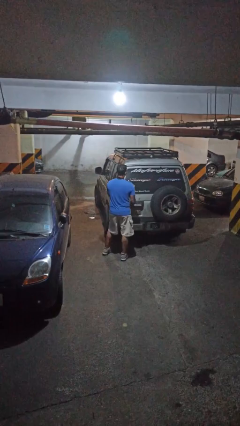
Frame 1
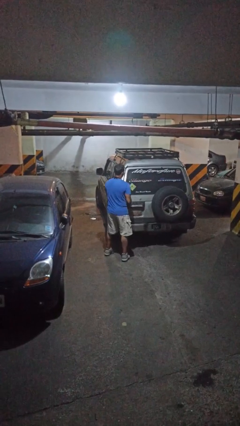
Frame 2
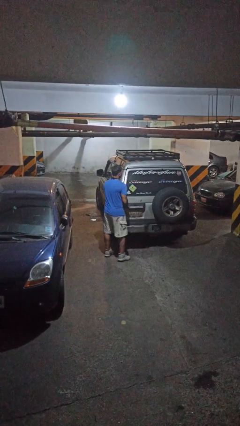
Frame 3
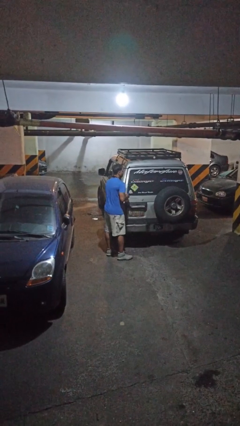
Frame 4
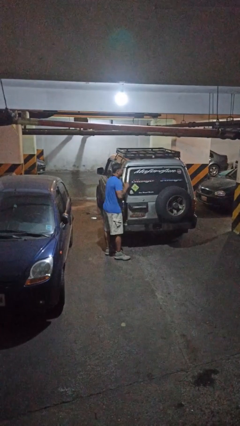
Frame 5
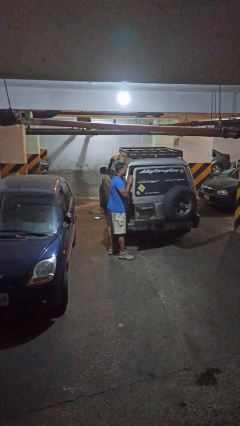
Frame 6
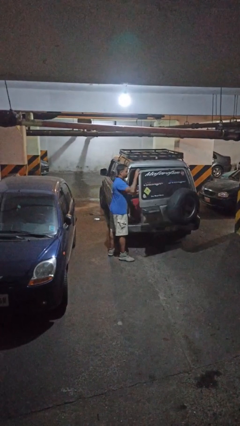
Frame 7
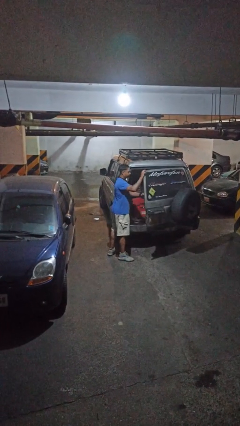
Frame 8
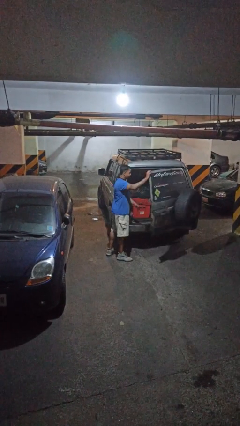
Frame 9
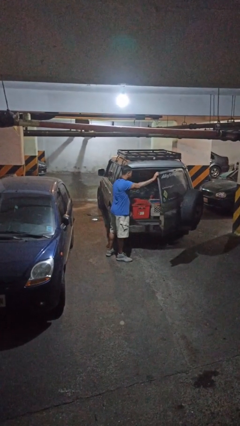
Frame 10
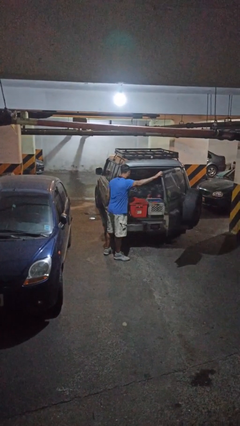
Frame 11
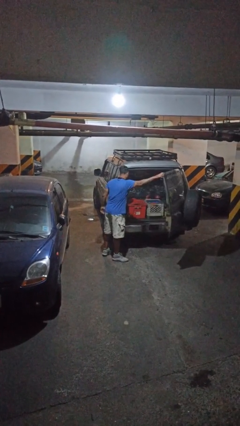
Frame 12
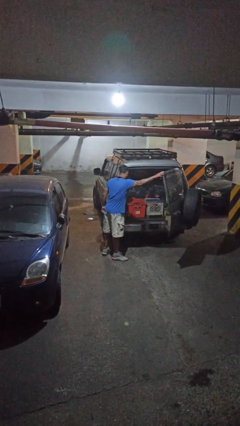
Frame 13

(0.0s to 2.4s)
person opens car trunk

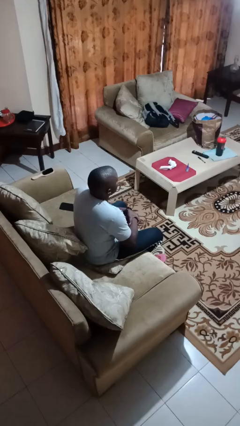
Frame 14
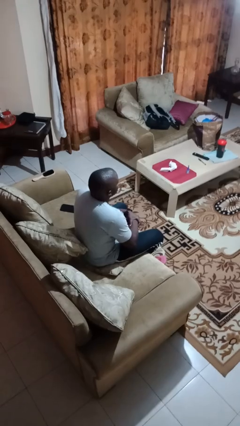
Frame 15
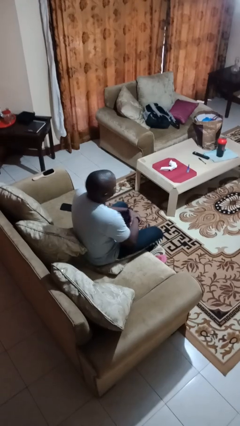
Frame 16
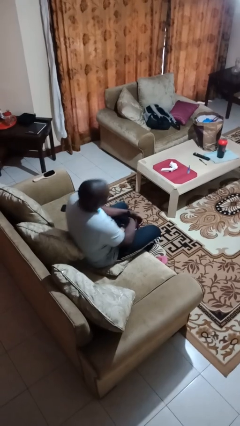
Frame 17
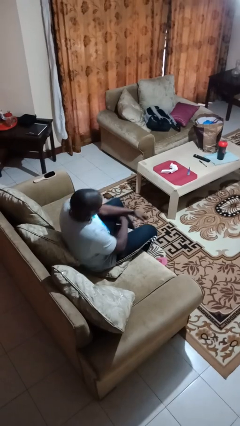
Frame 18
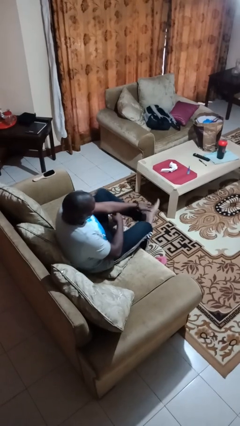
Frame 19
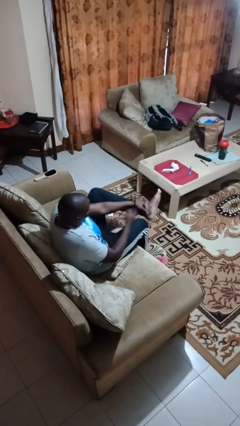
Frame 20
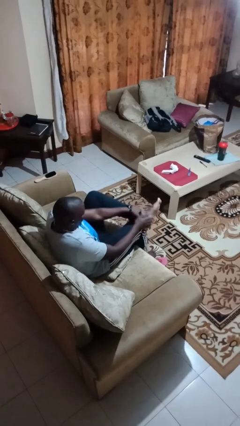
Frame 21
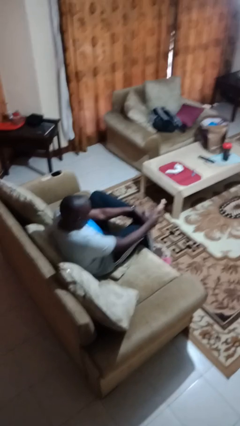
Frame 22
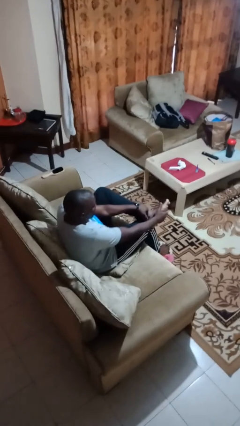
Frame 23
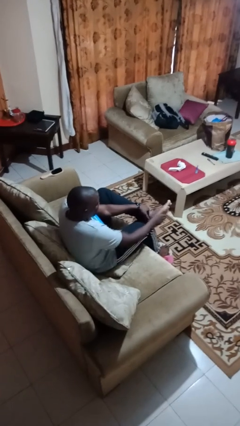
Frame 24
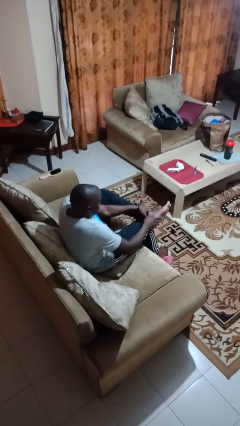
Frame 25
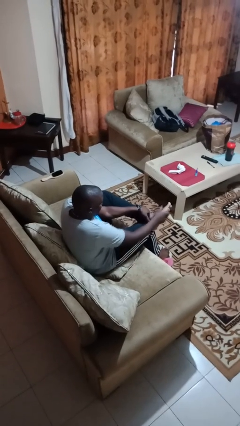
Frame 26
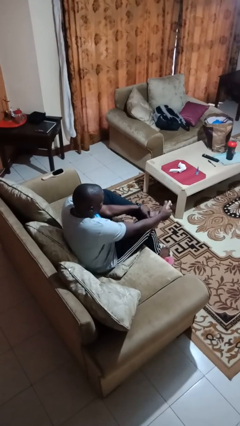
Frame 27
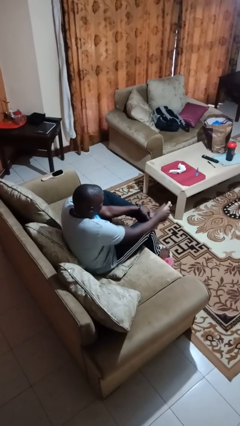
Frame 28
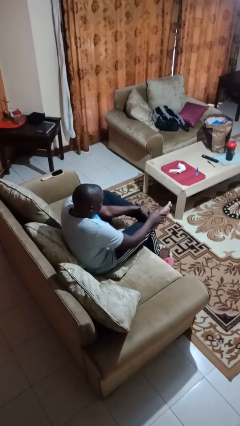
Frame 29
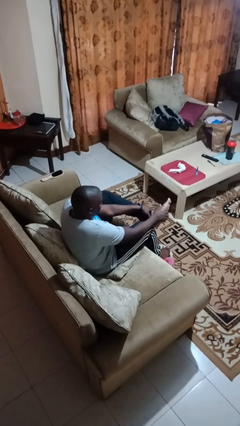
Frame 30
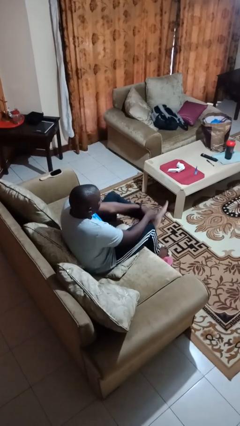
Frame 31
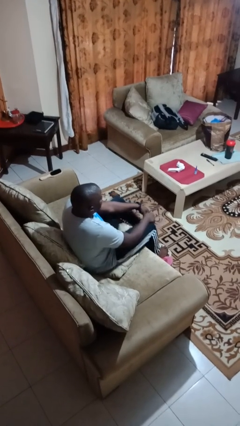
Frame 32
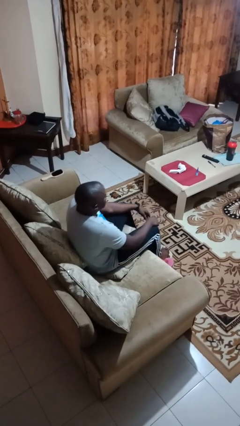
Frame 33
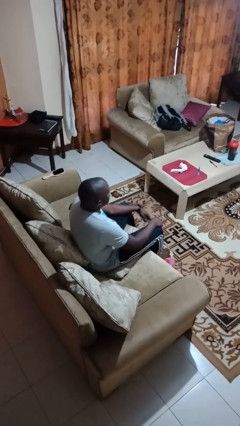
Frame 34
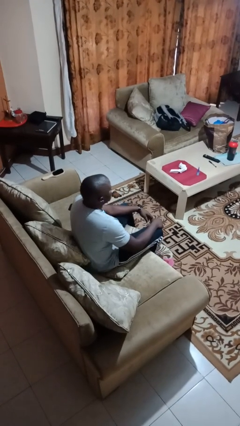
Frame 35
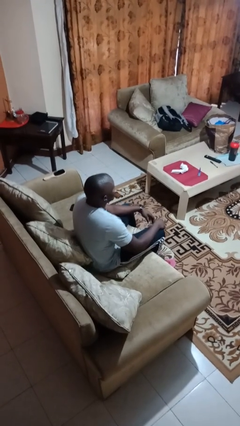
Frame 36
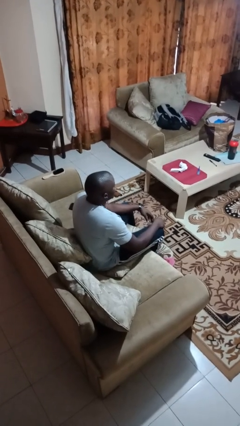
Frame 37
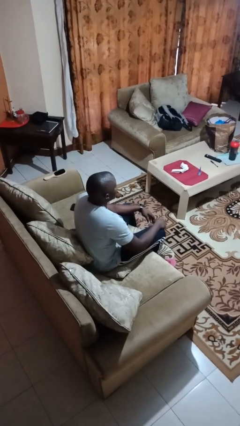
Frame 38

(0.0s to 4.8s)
person rubs foot

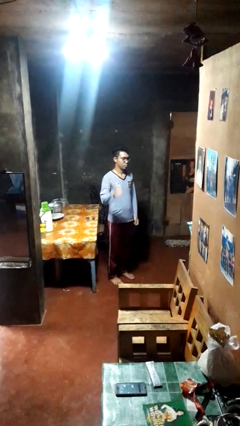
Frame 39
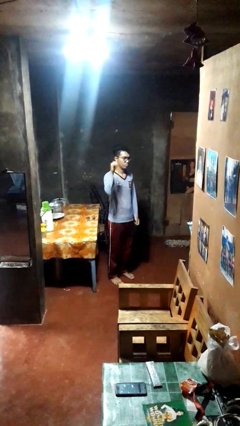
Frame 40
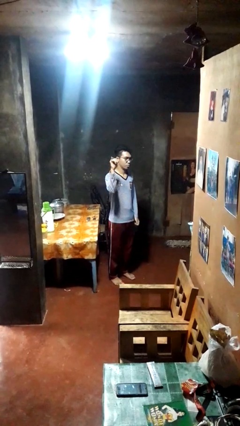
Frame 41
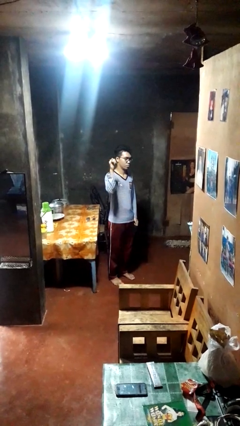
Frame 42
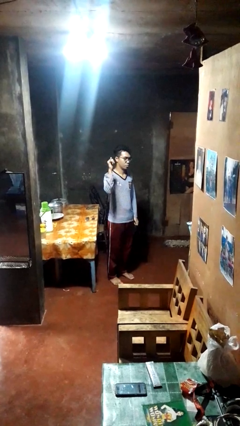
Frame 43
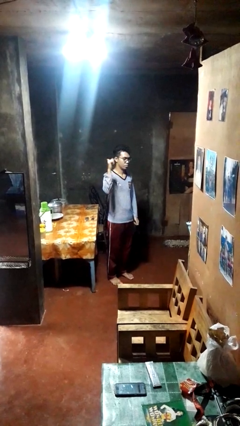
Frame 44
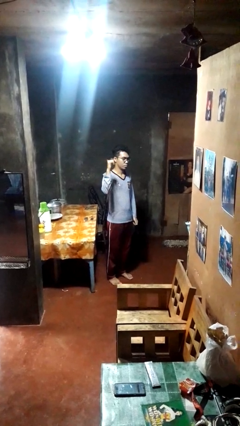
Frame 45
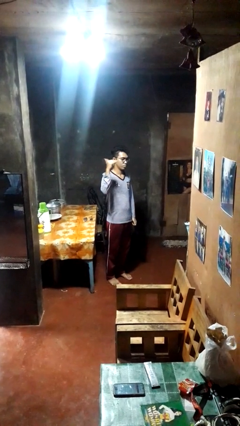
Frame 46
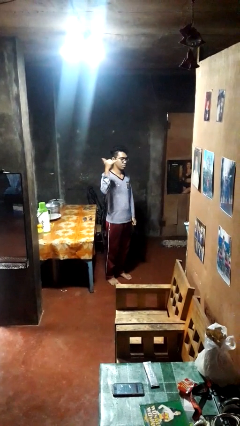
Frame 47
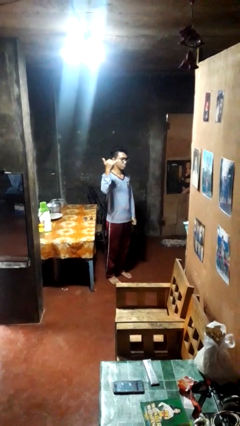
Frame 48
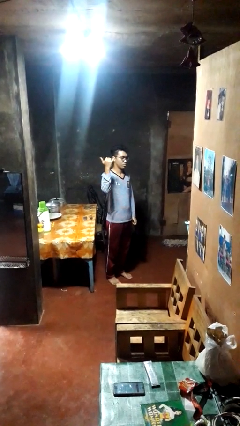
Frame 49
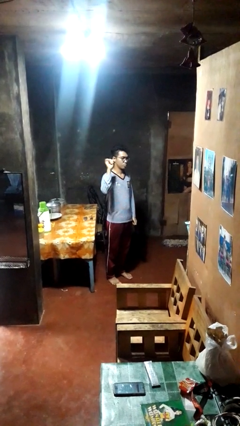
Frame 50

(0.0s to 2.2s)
person gestures hang loose

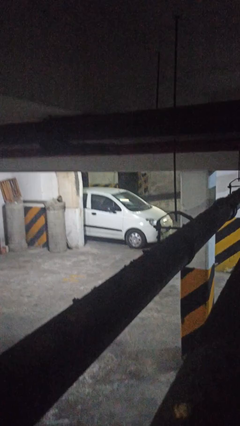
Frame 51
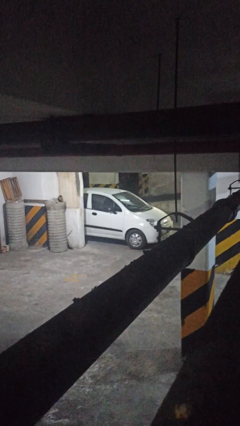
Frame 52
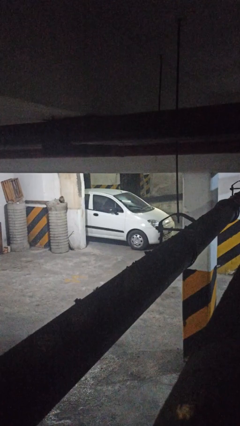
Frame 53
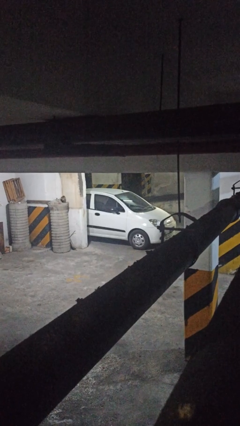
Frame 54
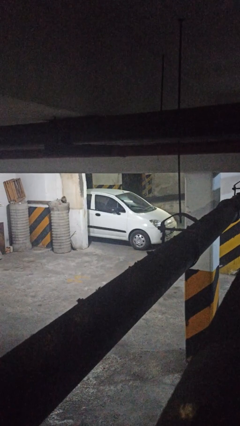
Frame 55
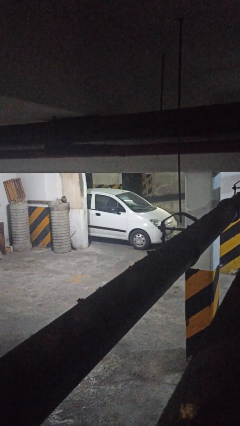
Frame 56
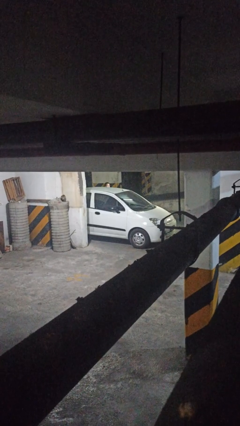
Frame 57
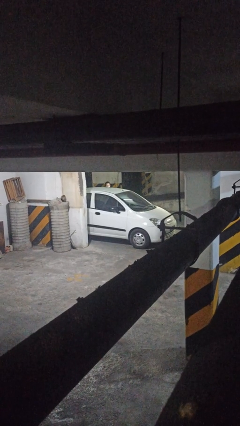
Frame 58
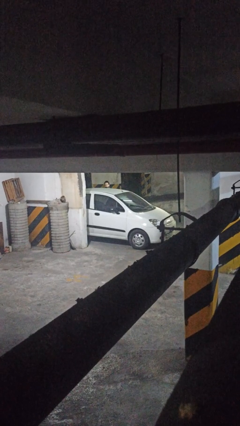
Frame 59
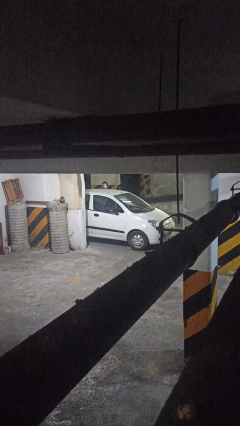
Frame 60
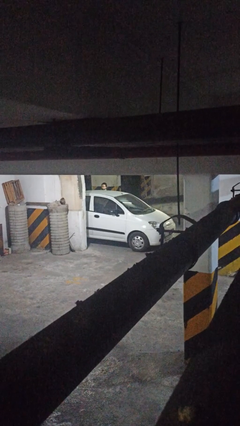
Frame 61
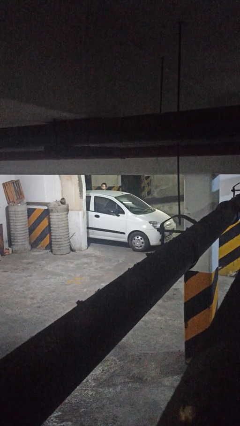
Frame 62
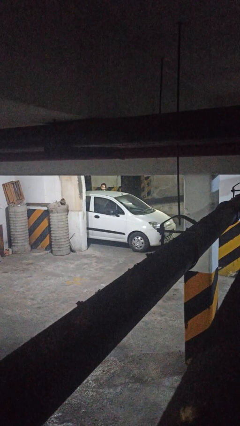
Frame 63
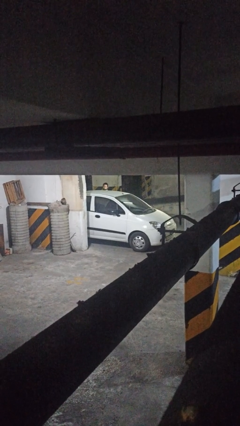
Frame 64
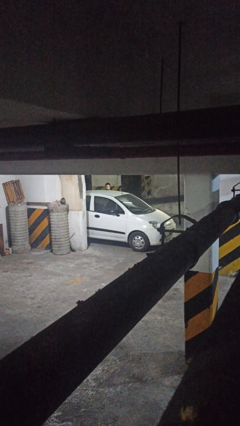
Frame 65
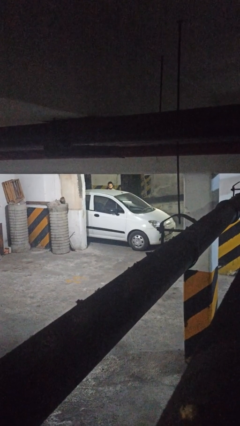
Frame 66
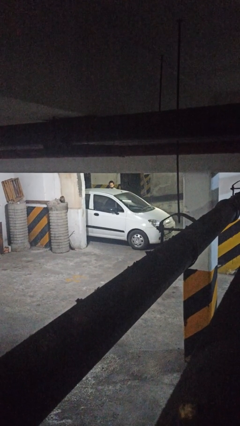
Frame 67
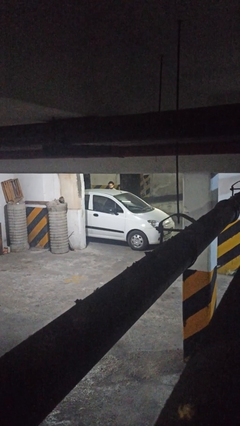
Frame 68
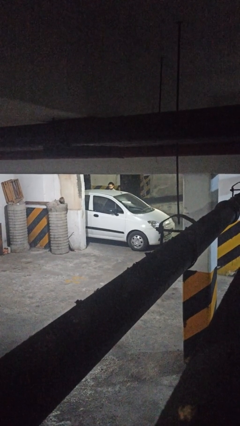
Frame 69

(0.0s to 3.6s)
car drops off person

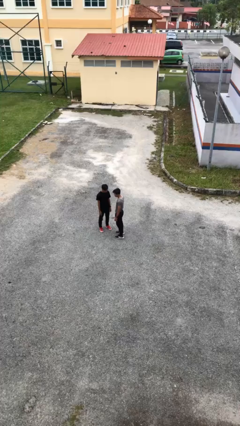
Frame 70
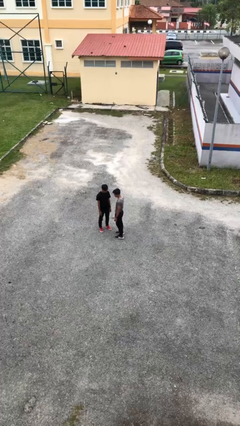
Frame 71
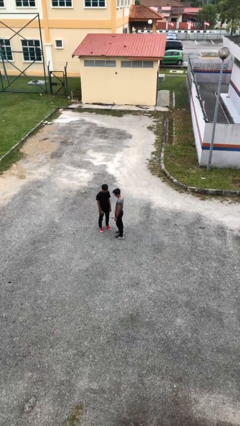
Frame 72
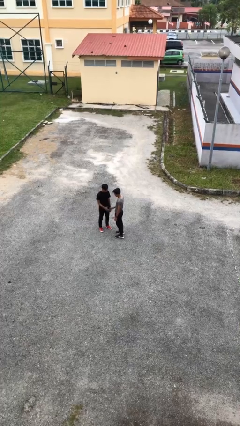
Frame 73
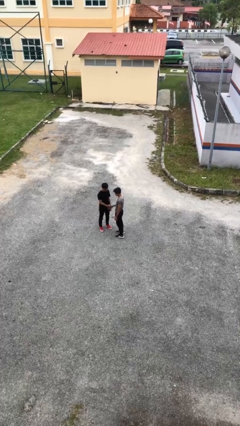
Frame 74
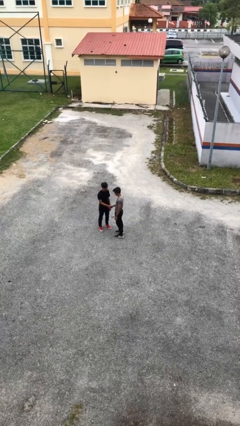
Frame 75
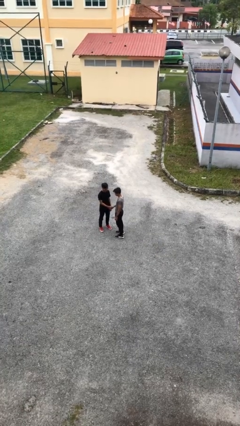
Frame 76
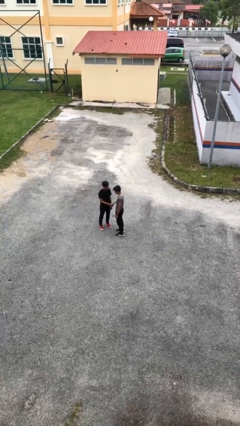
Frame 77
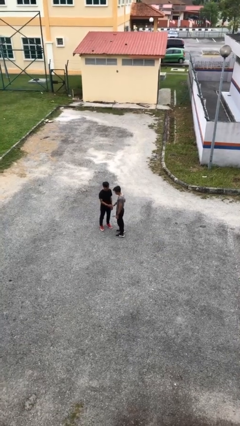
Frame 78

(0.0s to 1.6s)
person shakes hand

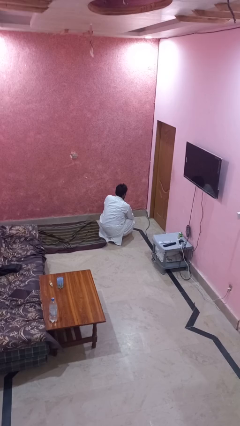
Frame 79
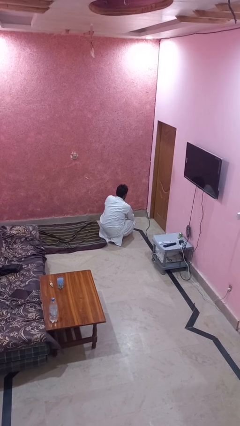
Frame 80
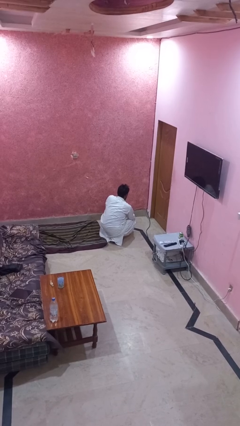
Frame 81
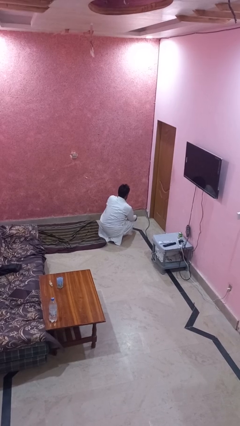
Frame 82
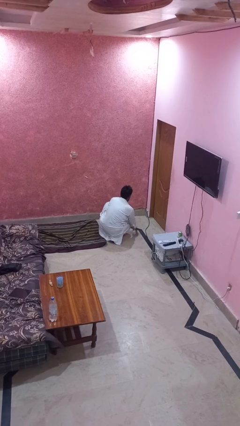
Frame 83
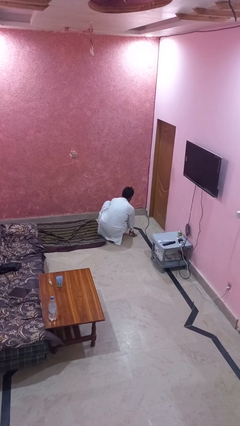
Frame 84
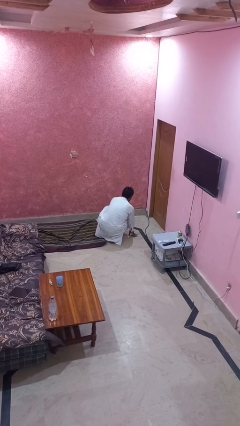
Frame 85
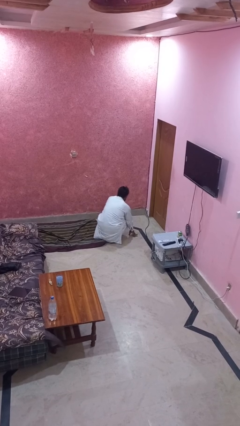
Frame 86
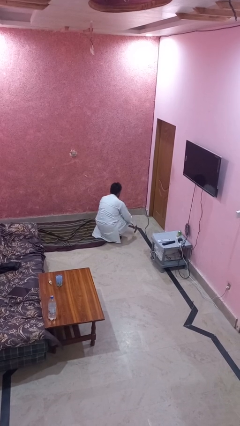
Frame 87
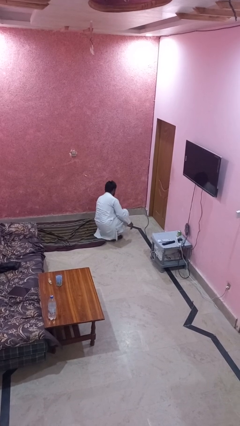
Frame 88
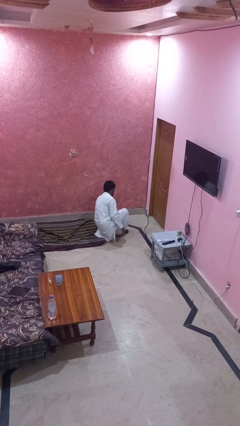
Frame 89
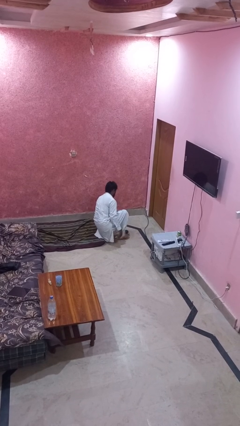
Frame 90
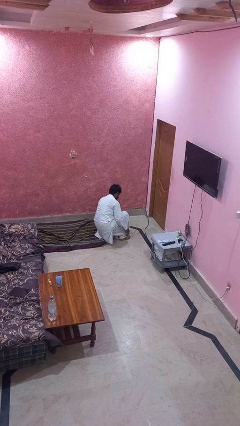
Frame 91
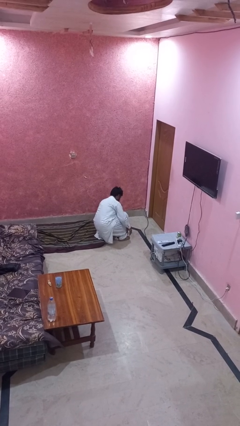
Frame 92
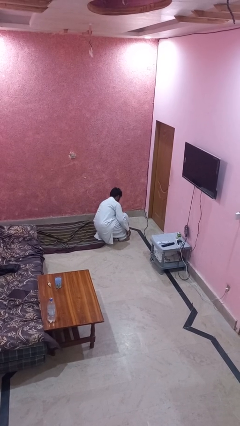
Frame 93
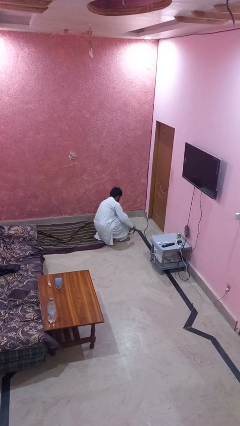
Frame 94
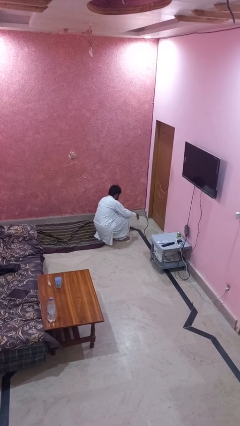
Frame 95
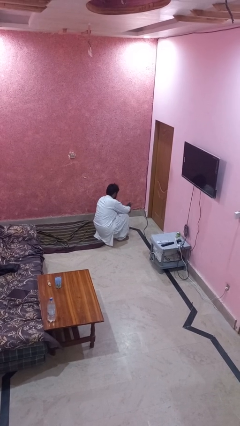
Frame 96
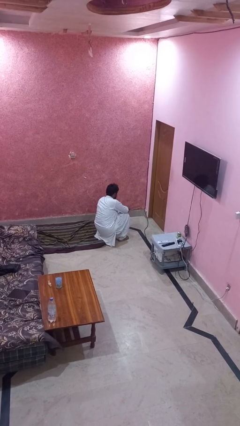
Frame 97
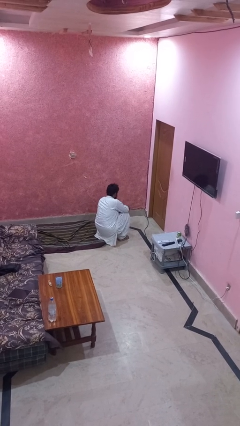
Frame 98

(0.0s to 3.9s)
person takes off shoes
